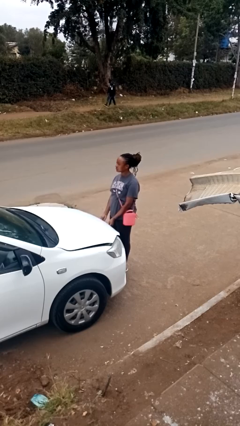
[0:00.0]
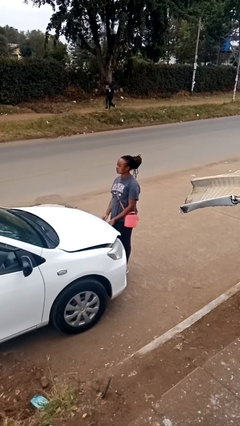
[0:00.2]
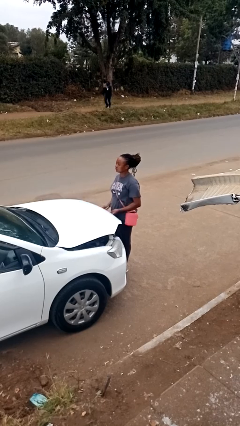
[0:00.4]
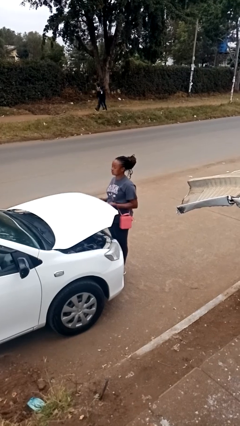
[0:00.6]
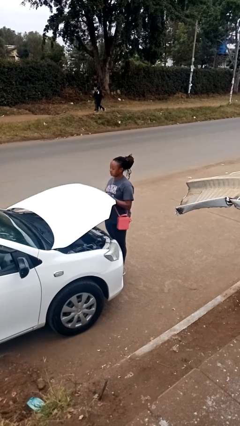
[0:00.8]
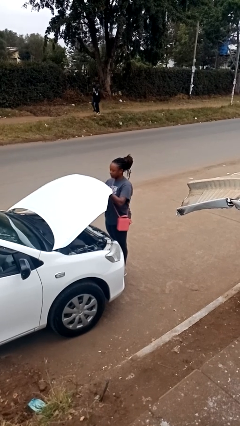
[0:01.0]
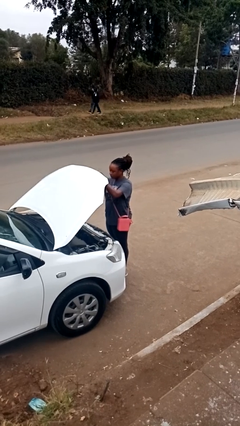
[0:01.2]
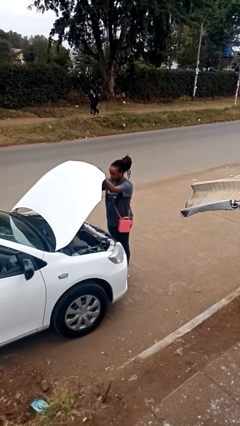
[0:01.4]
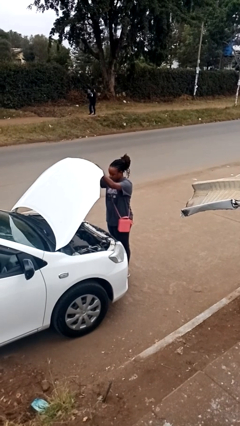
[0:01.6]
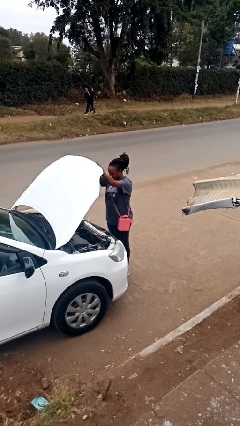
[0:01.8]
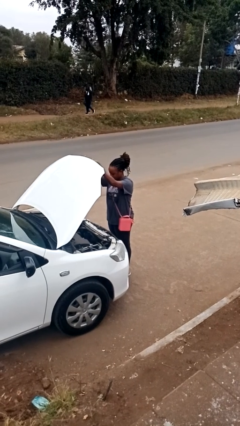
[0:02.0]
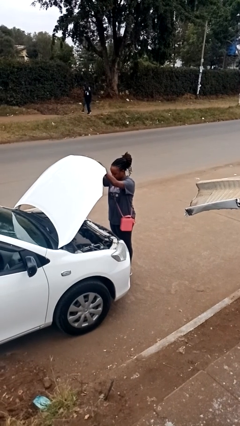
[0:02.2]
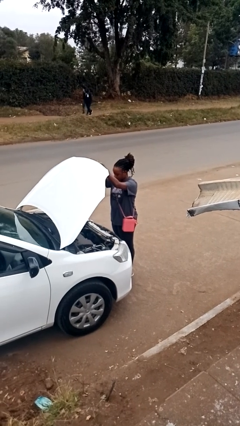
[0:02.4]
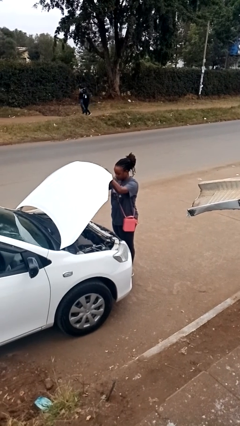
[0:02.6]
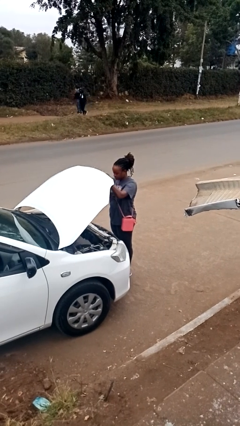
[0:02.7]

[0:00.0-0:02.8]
person opens car hood

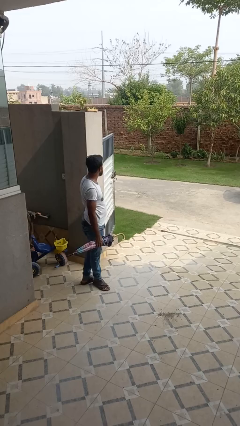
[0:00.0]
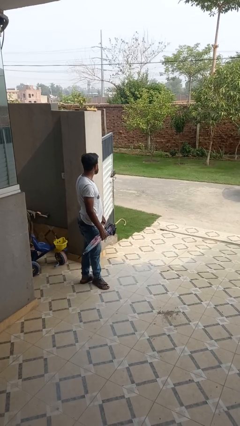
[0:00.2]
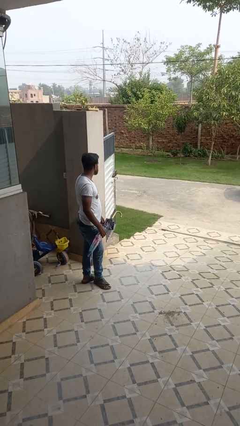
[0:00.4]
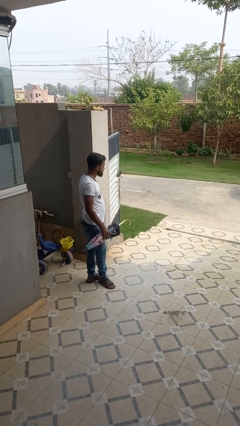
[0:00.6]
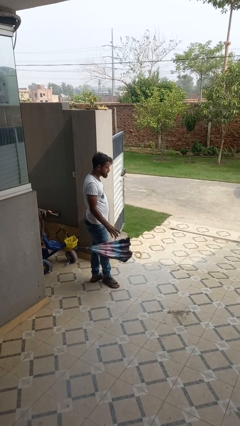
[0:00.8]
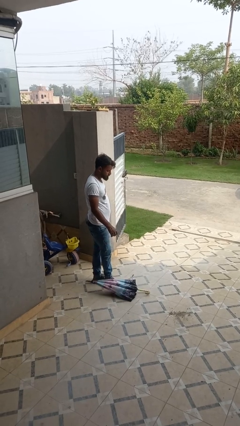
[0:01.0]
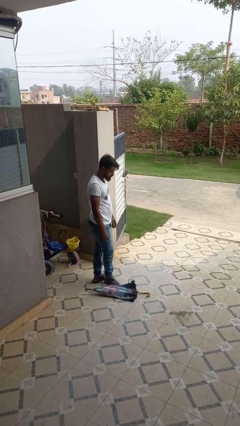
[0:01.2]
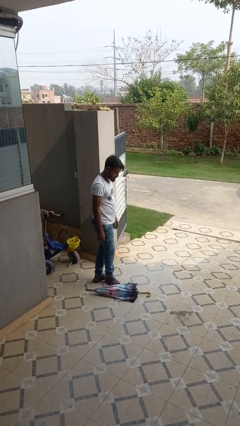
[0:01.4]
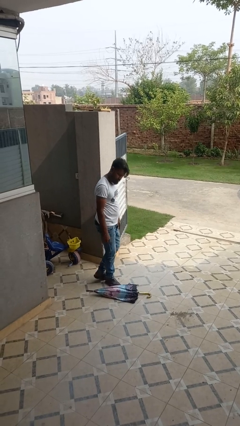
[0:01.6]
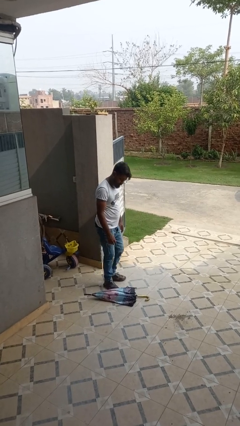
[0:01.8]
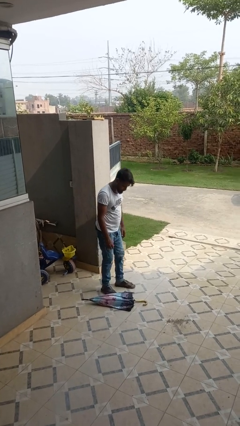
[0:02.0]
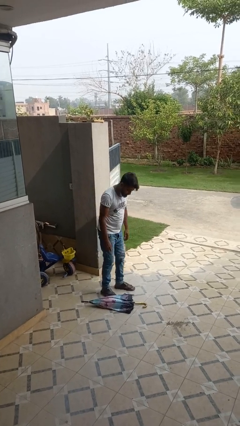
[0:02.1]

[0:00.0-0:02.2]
person drops object

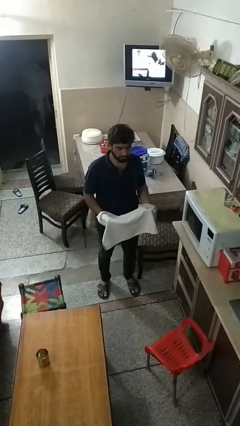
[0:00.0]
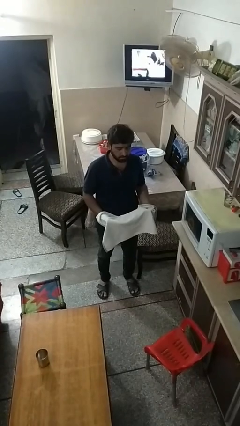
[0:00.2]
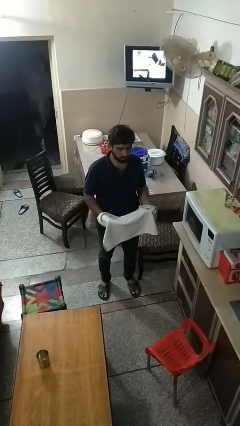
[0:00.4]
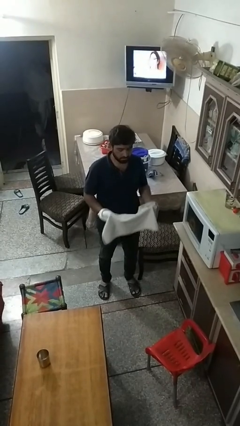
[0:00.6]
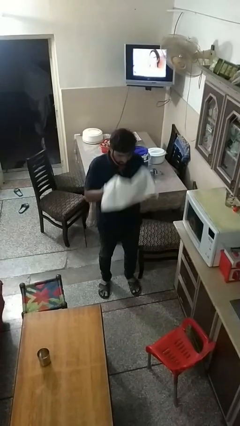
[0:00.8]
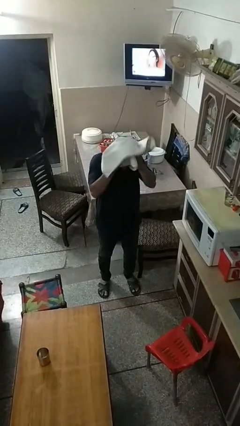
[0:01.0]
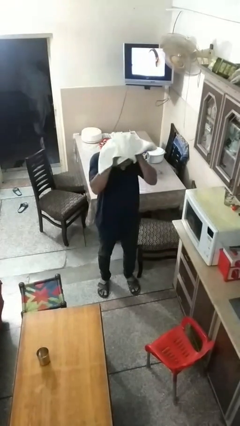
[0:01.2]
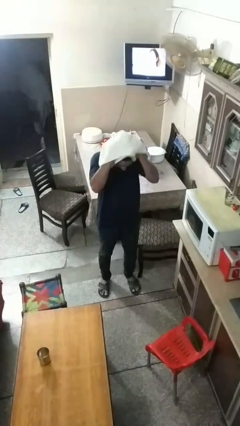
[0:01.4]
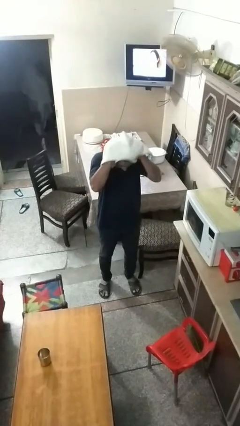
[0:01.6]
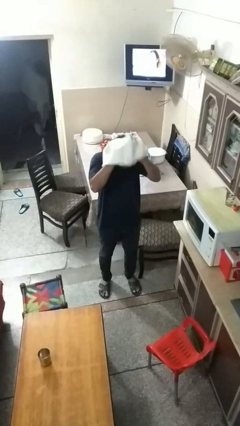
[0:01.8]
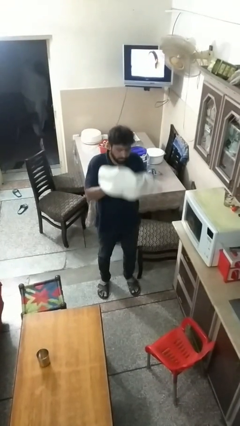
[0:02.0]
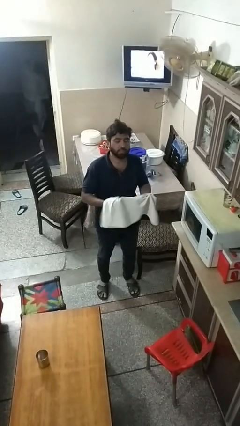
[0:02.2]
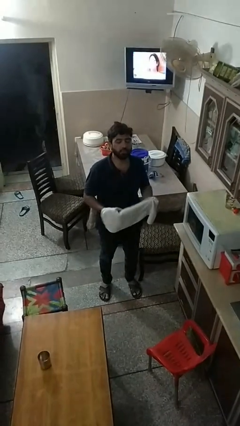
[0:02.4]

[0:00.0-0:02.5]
person dries hair with towel

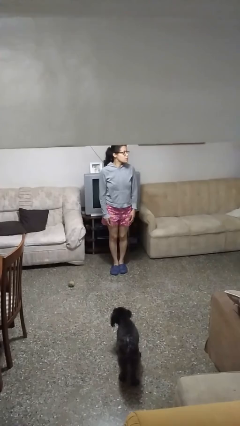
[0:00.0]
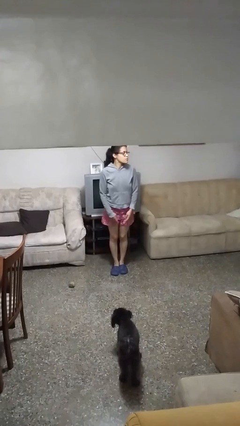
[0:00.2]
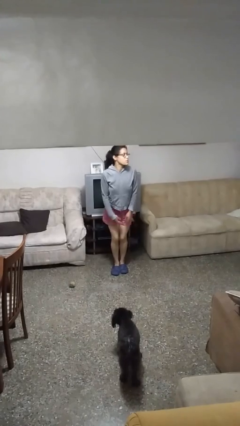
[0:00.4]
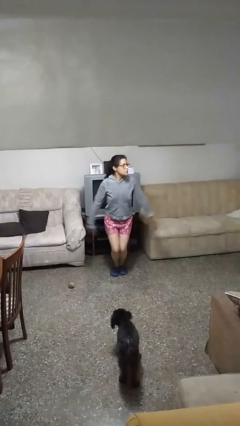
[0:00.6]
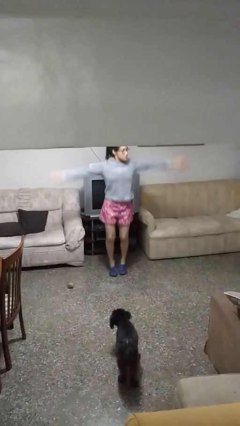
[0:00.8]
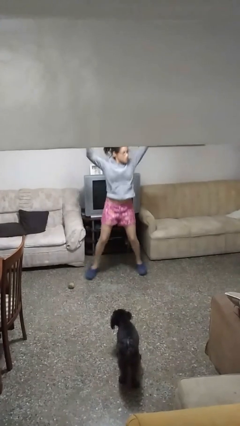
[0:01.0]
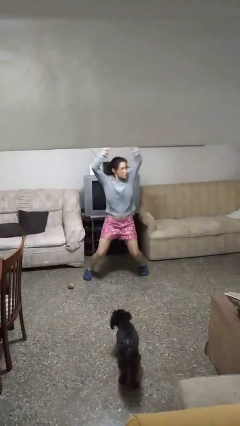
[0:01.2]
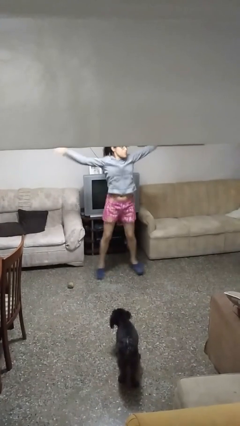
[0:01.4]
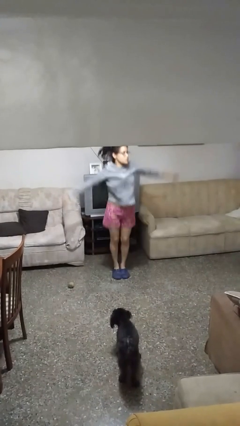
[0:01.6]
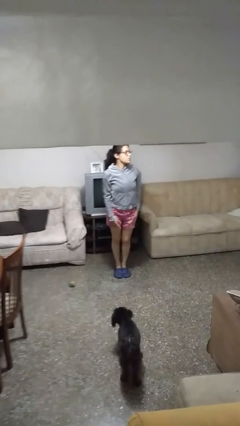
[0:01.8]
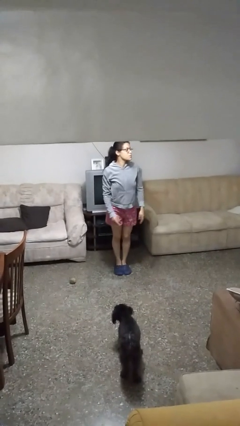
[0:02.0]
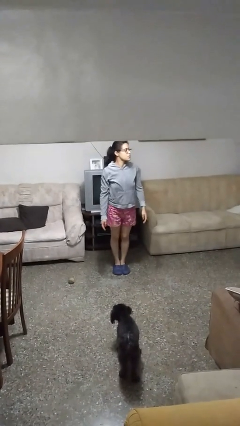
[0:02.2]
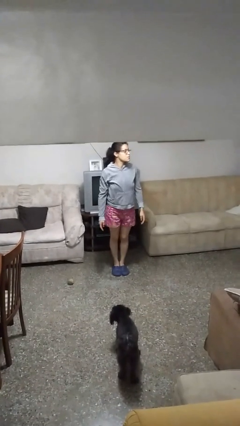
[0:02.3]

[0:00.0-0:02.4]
person exercises with jumping jacks

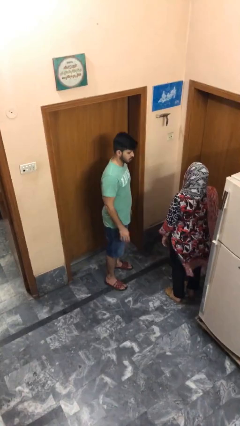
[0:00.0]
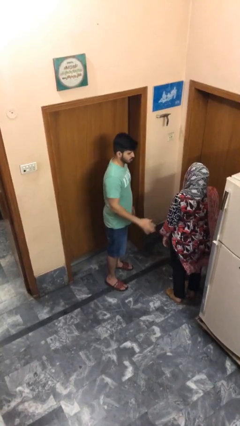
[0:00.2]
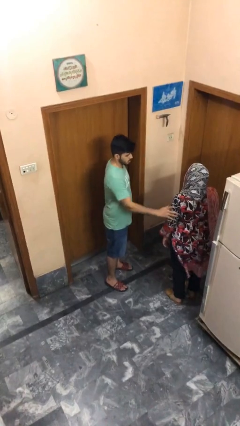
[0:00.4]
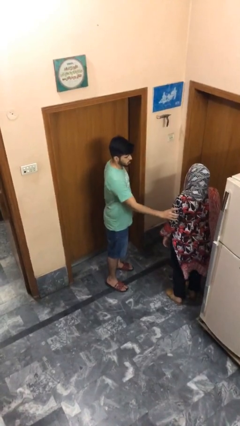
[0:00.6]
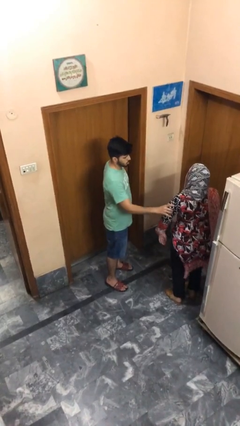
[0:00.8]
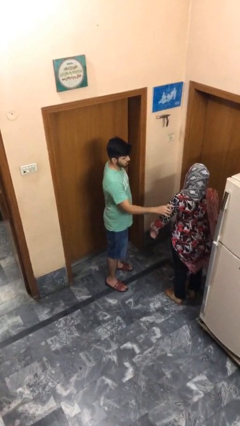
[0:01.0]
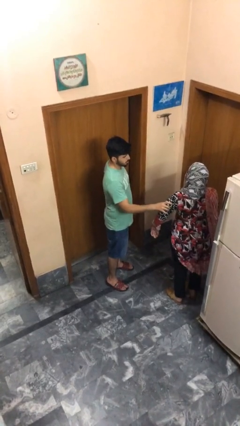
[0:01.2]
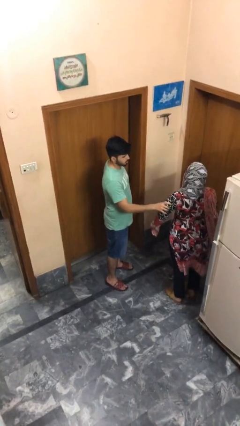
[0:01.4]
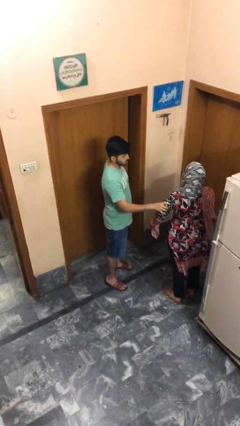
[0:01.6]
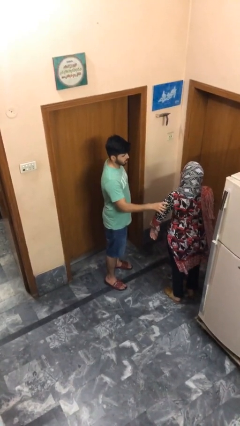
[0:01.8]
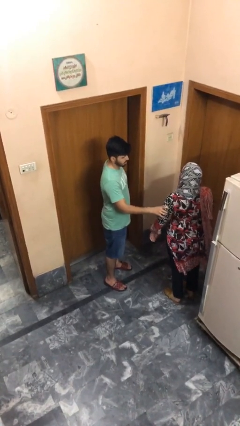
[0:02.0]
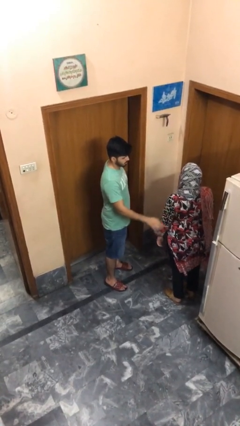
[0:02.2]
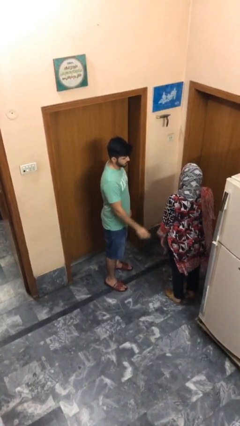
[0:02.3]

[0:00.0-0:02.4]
person grabs person by bicep

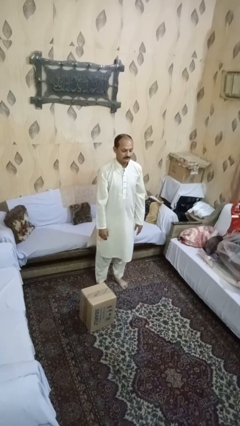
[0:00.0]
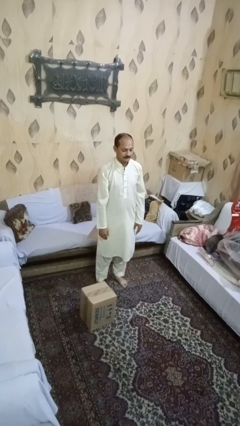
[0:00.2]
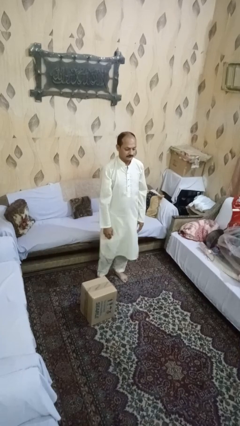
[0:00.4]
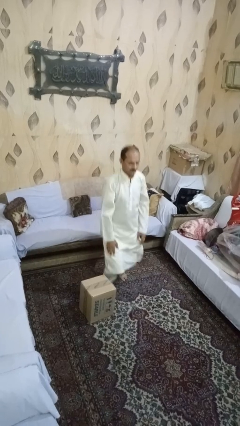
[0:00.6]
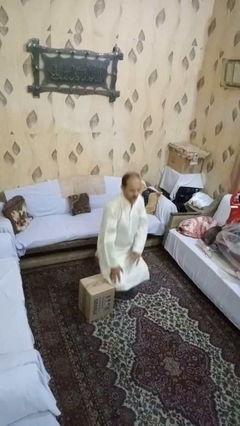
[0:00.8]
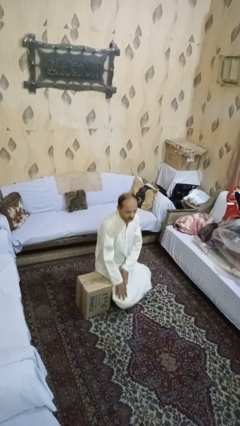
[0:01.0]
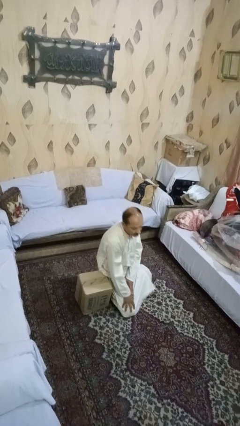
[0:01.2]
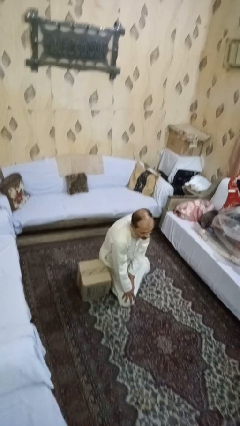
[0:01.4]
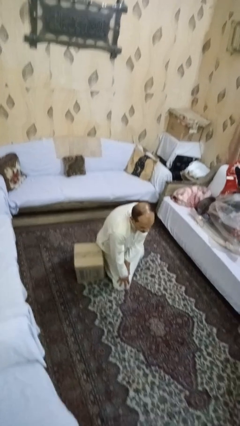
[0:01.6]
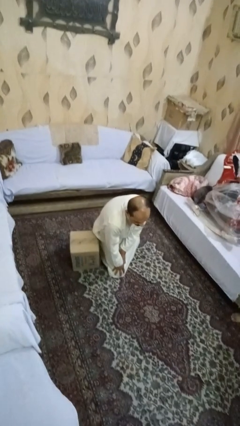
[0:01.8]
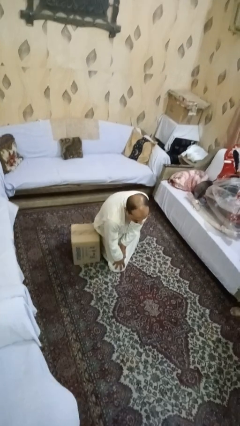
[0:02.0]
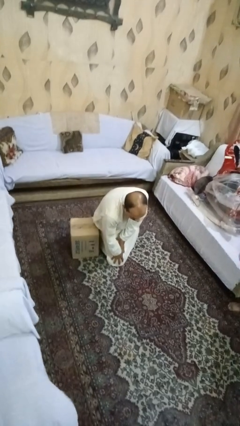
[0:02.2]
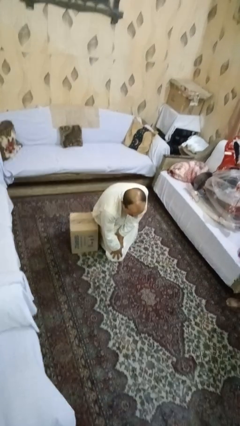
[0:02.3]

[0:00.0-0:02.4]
person trips on object on floor

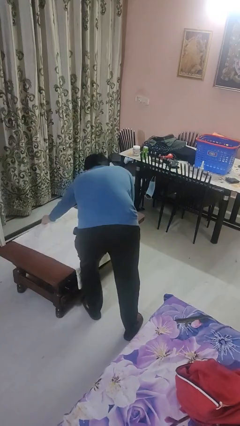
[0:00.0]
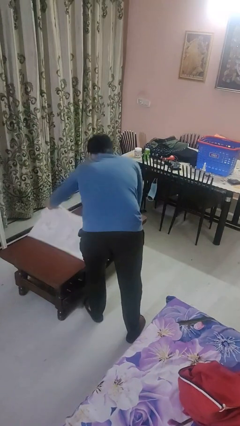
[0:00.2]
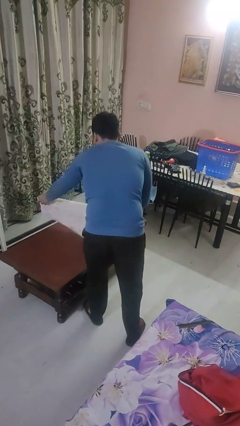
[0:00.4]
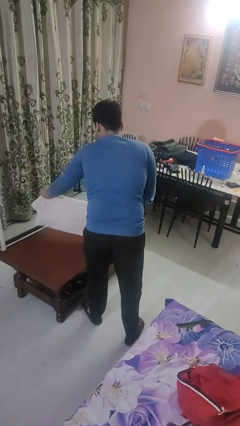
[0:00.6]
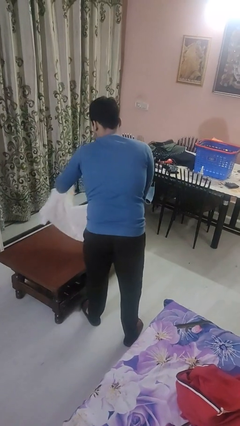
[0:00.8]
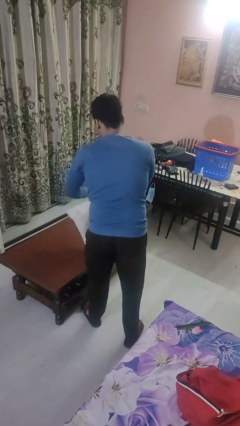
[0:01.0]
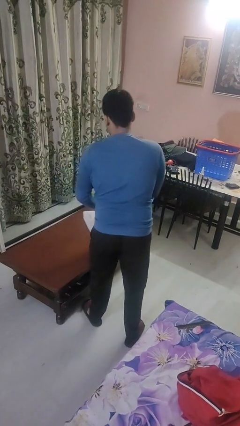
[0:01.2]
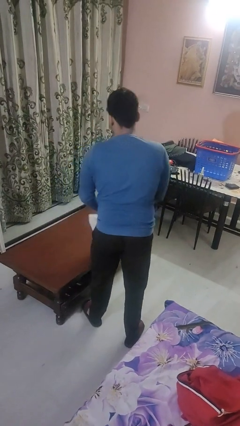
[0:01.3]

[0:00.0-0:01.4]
person folds tablecloth

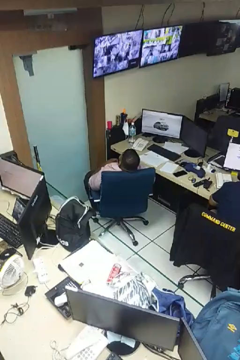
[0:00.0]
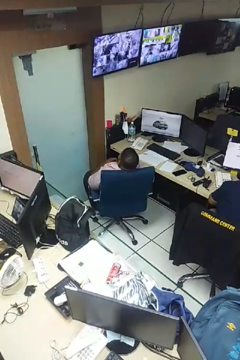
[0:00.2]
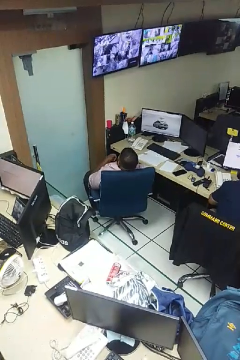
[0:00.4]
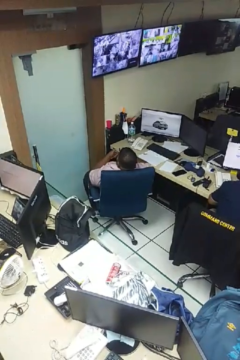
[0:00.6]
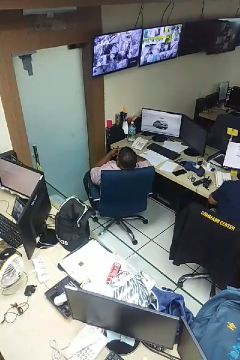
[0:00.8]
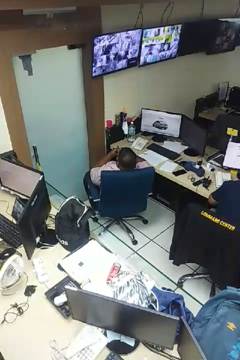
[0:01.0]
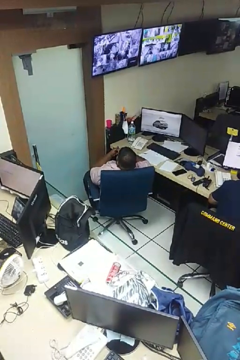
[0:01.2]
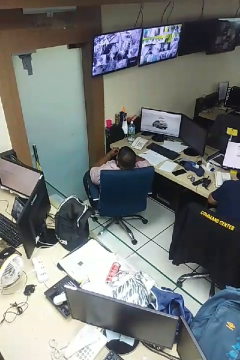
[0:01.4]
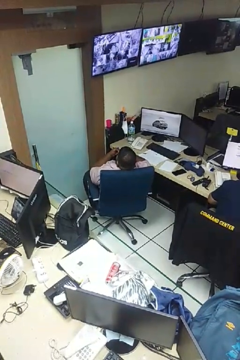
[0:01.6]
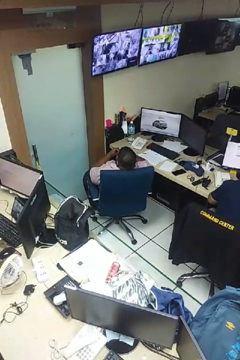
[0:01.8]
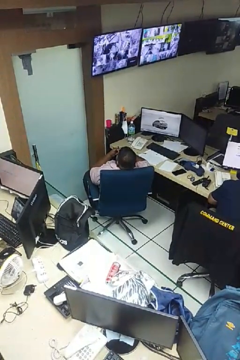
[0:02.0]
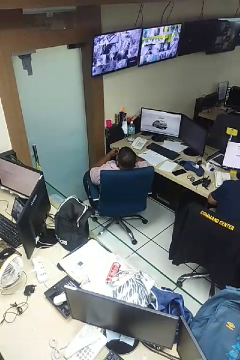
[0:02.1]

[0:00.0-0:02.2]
person files fingernails
